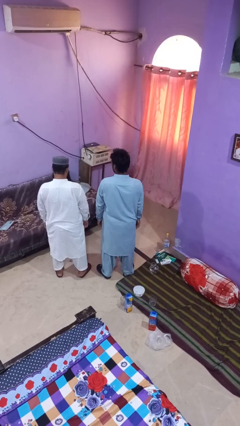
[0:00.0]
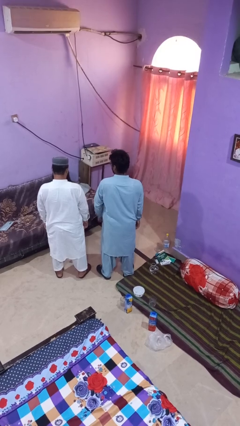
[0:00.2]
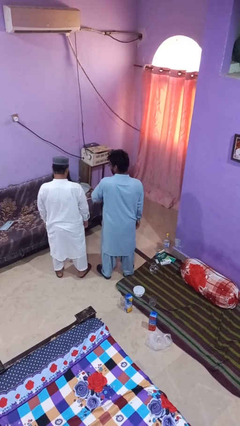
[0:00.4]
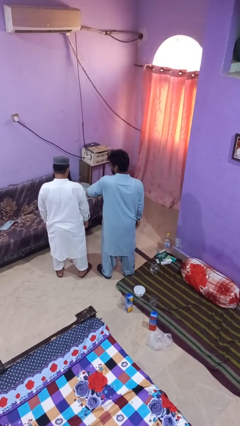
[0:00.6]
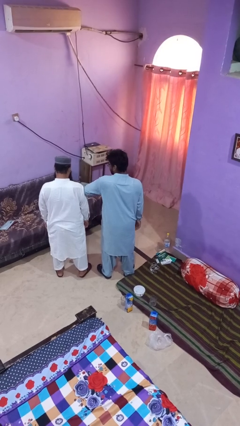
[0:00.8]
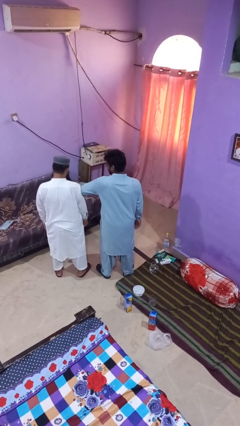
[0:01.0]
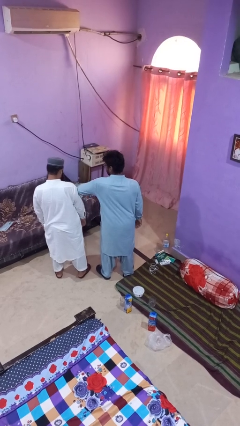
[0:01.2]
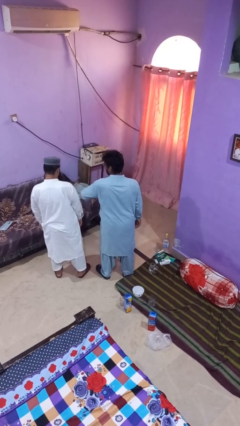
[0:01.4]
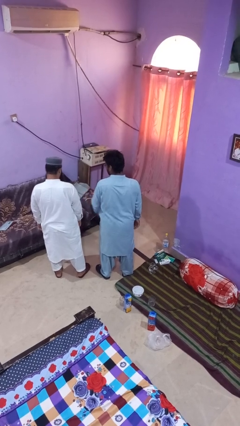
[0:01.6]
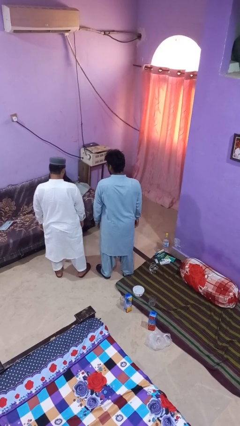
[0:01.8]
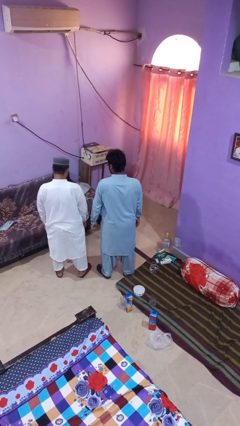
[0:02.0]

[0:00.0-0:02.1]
person nudges person with elbow

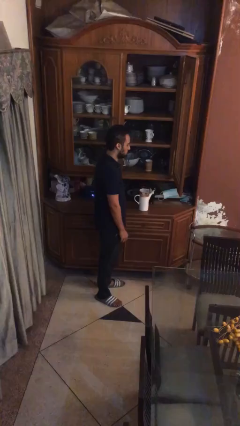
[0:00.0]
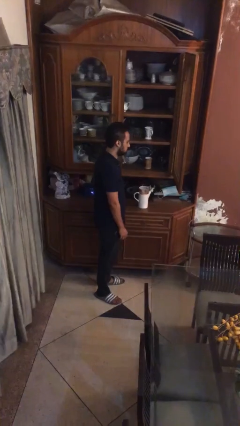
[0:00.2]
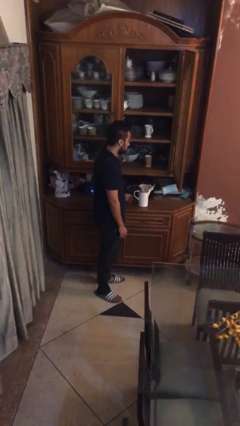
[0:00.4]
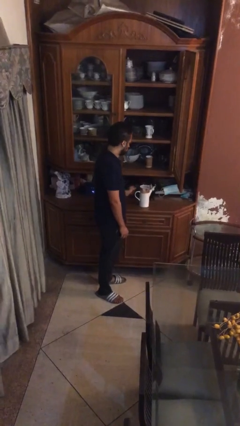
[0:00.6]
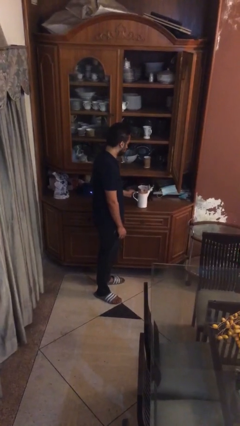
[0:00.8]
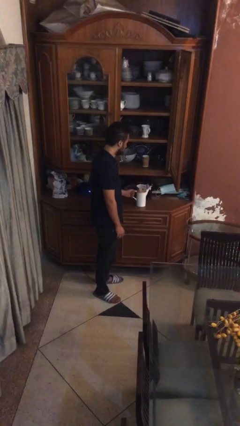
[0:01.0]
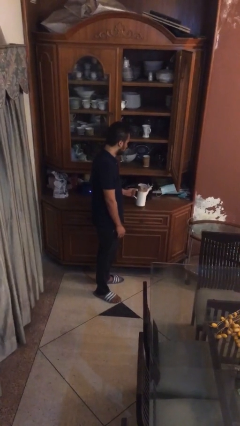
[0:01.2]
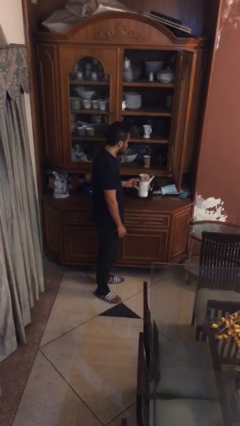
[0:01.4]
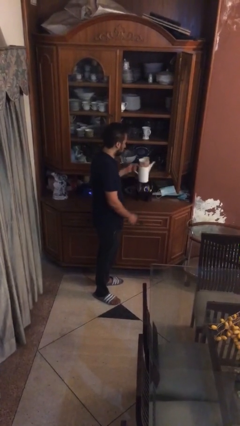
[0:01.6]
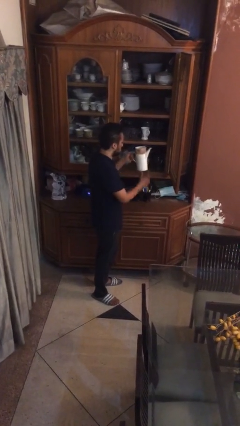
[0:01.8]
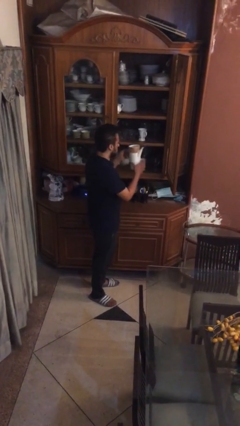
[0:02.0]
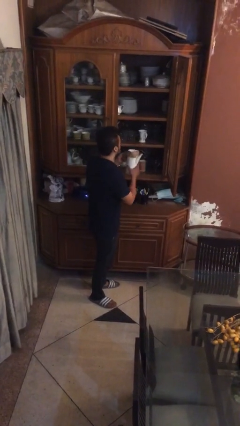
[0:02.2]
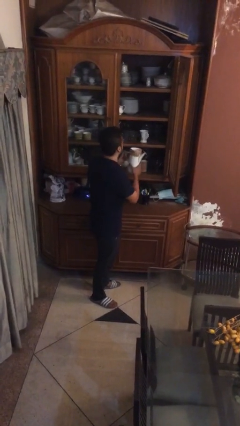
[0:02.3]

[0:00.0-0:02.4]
person picks up object from table

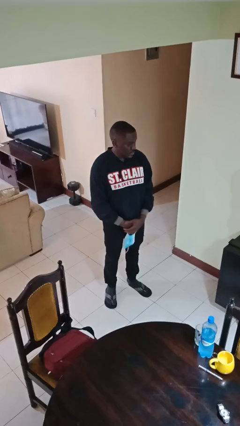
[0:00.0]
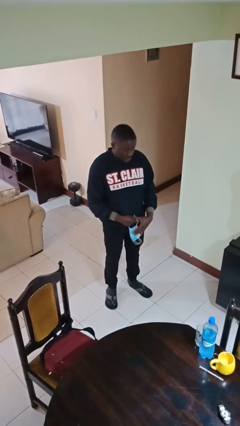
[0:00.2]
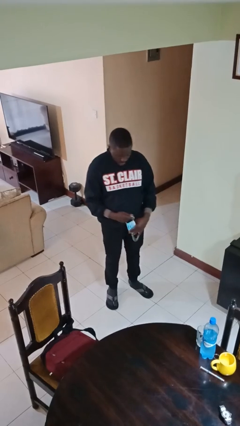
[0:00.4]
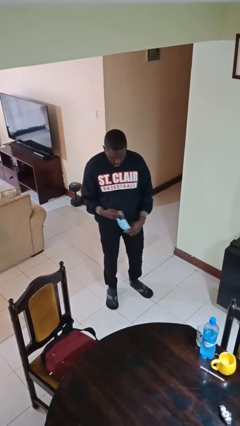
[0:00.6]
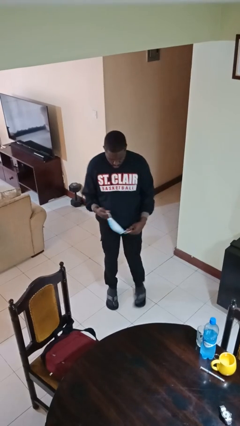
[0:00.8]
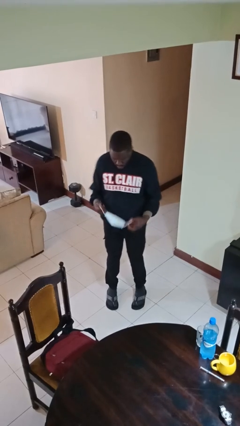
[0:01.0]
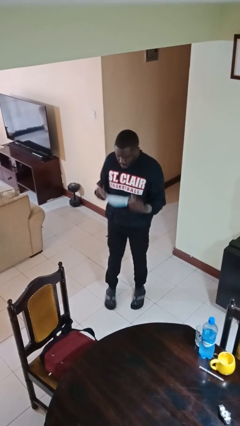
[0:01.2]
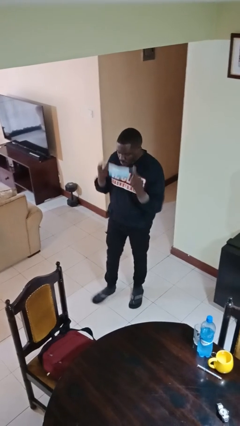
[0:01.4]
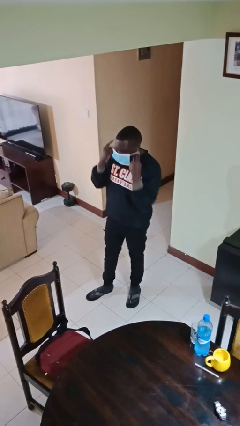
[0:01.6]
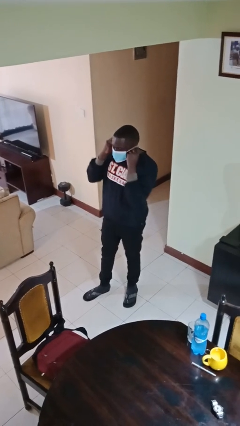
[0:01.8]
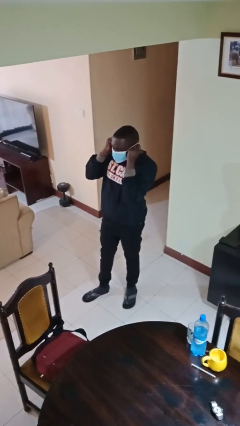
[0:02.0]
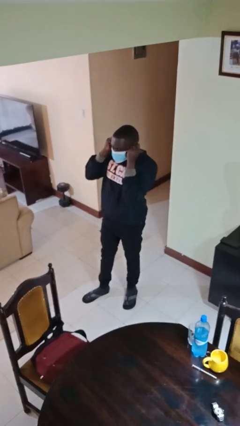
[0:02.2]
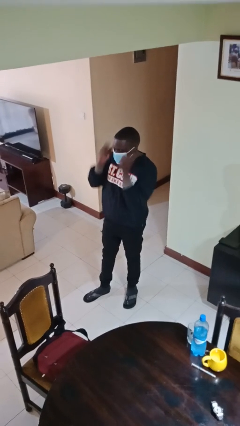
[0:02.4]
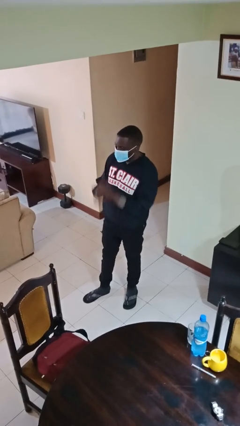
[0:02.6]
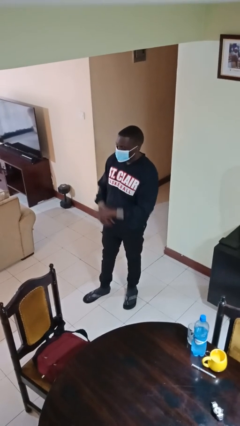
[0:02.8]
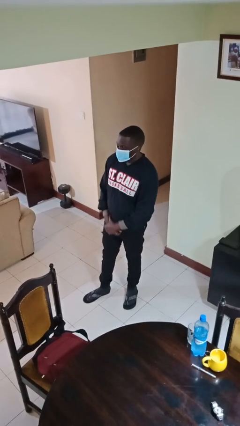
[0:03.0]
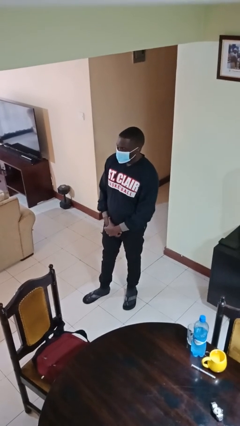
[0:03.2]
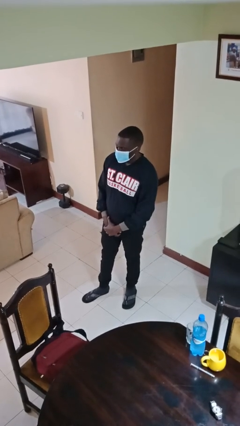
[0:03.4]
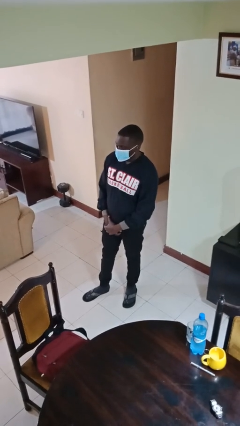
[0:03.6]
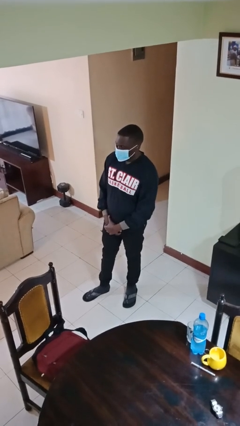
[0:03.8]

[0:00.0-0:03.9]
person puts on facemask

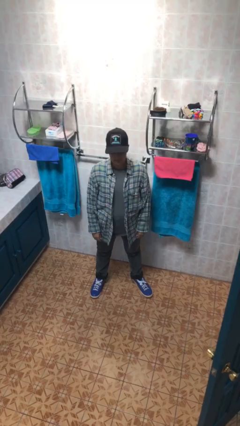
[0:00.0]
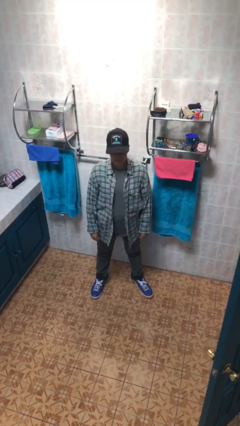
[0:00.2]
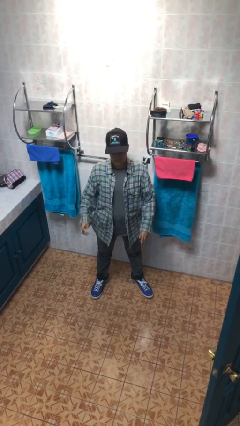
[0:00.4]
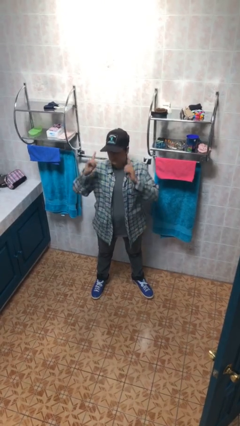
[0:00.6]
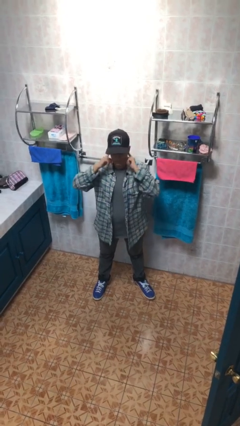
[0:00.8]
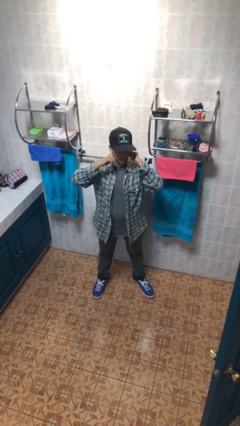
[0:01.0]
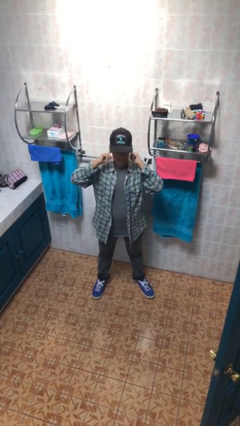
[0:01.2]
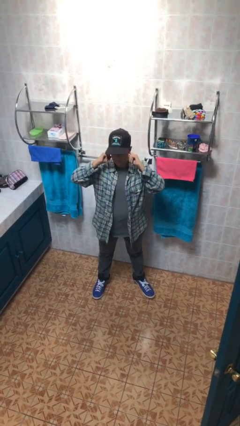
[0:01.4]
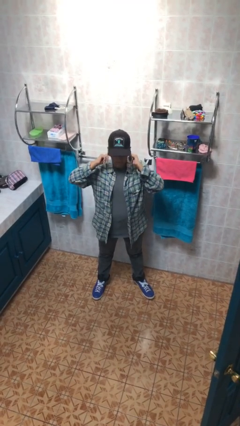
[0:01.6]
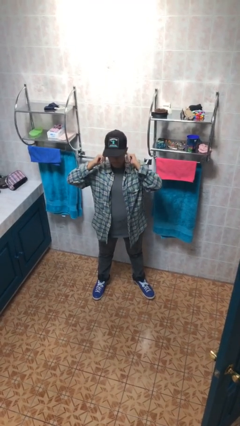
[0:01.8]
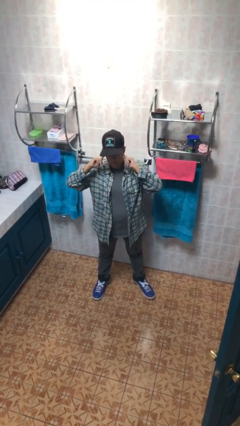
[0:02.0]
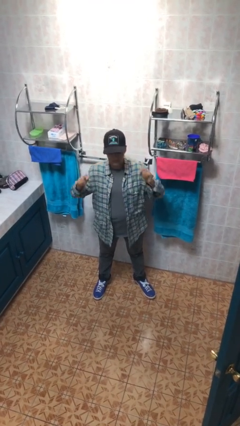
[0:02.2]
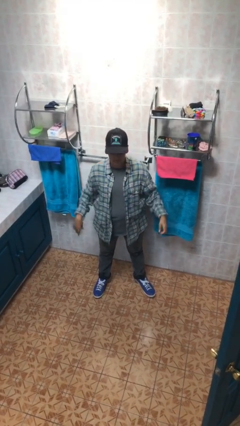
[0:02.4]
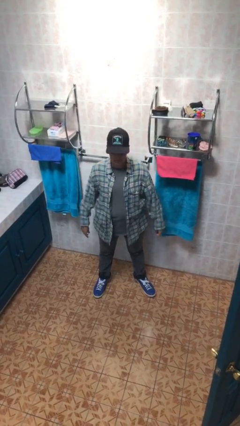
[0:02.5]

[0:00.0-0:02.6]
person puts fingers in ear

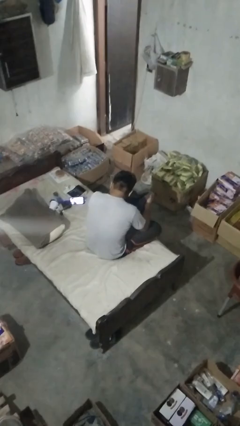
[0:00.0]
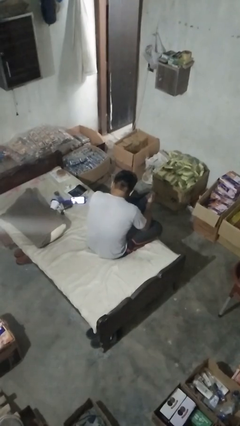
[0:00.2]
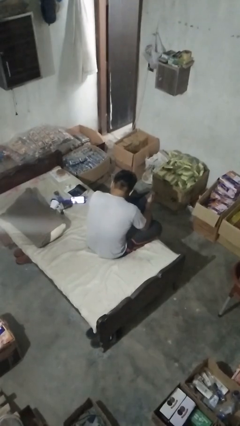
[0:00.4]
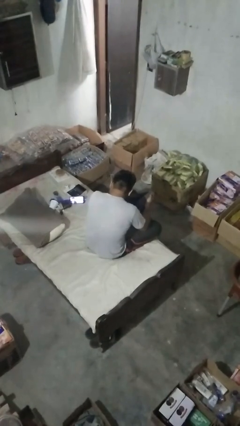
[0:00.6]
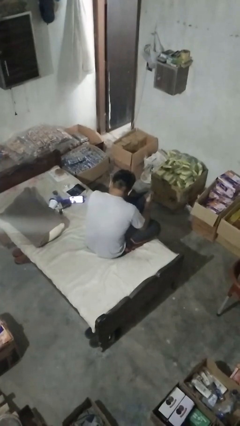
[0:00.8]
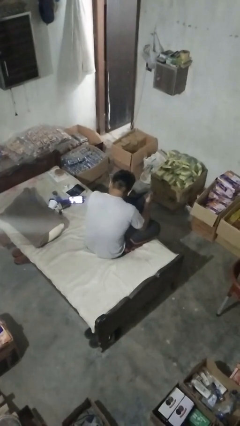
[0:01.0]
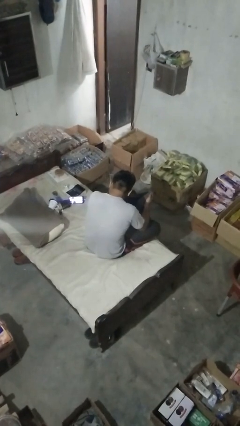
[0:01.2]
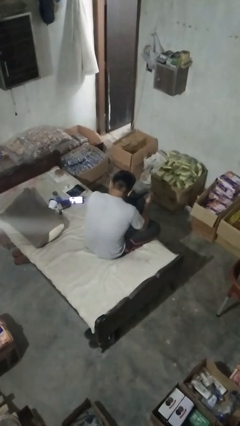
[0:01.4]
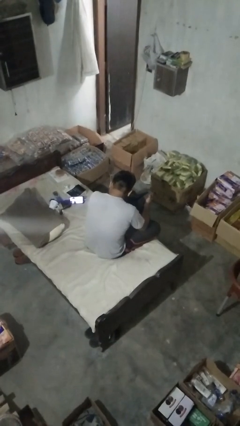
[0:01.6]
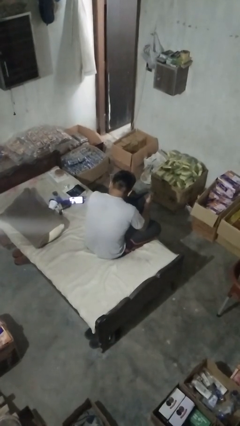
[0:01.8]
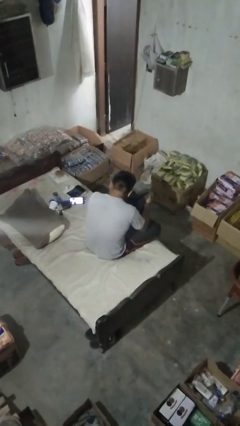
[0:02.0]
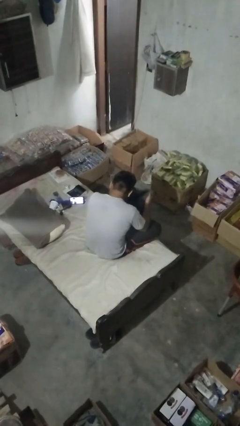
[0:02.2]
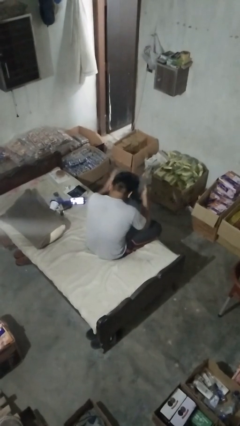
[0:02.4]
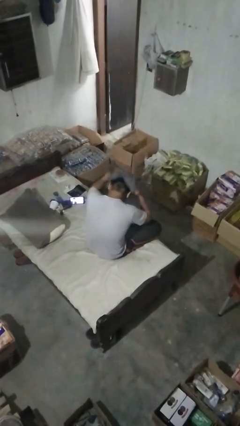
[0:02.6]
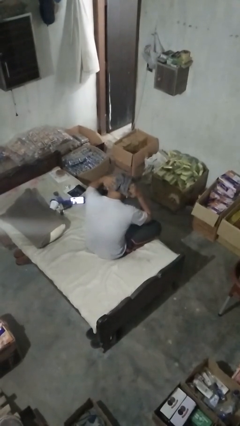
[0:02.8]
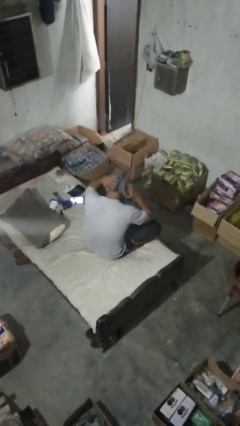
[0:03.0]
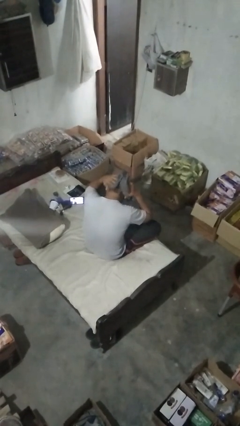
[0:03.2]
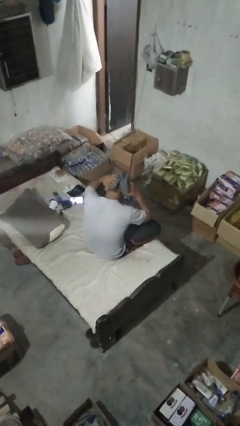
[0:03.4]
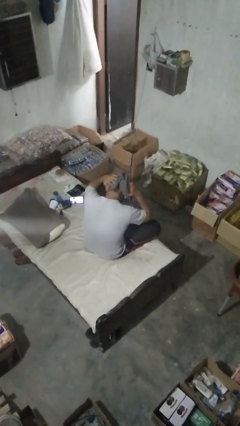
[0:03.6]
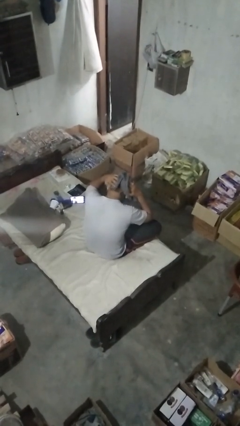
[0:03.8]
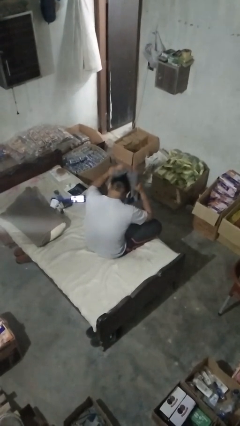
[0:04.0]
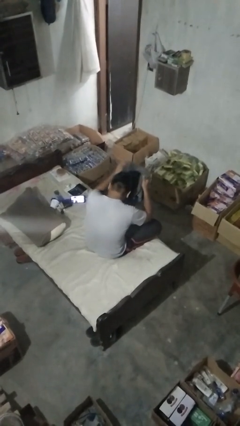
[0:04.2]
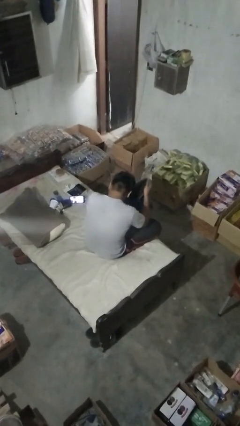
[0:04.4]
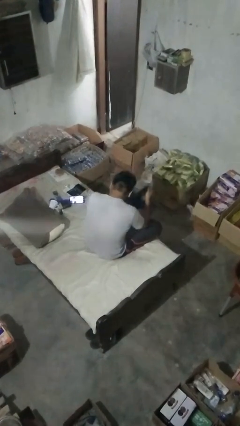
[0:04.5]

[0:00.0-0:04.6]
person dries hair with towel

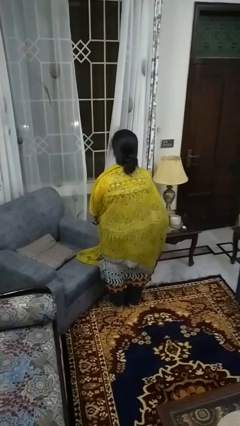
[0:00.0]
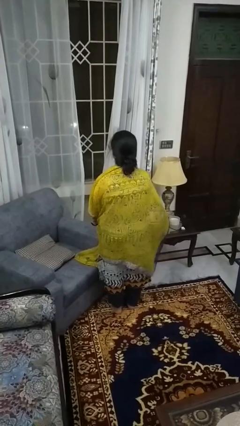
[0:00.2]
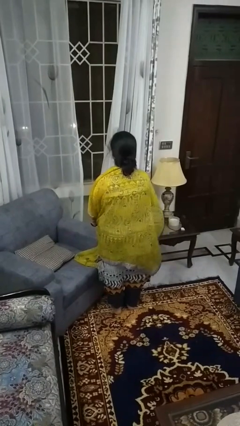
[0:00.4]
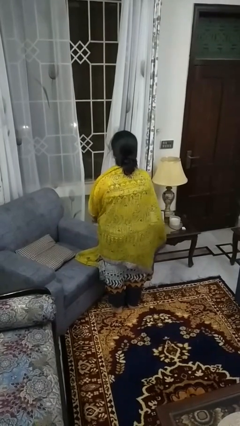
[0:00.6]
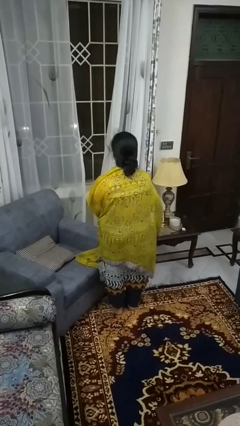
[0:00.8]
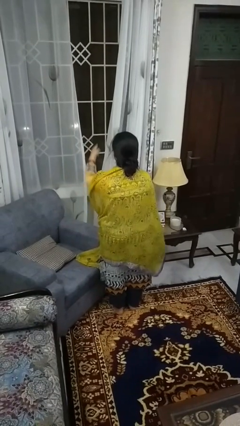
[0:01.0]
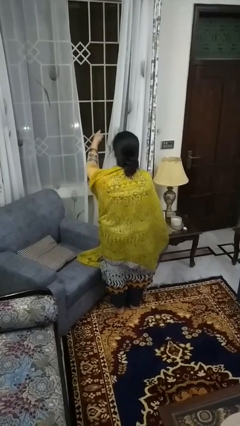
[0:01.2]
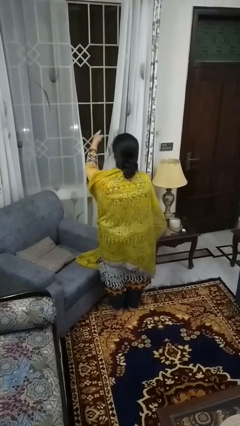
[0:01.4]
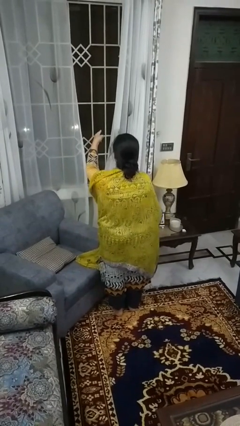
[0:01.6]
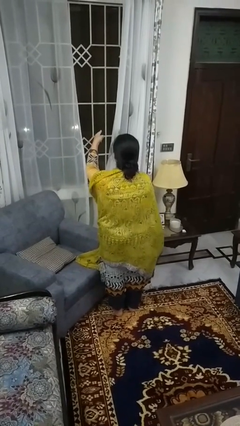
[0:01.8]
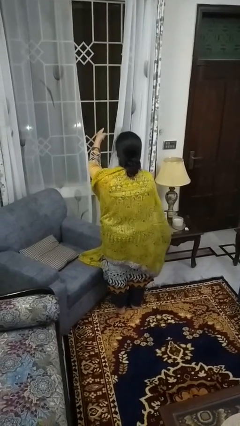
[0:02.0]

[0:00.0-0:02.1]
person points at person
